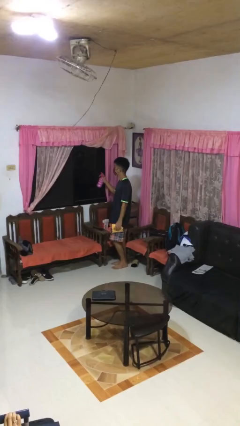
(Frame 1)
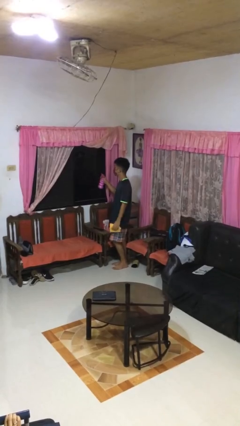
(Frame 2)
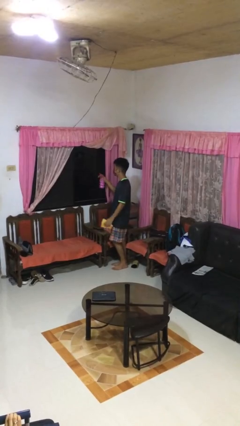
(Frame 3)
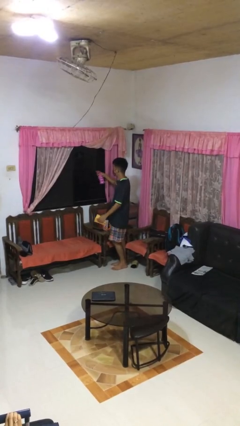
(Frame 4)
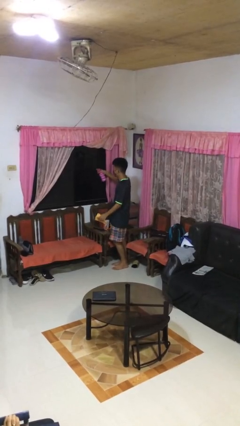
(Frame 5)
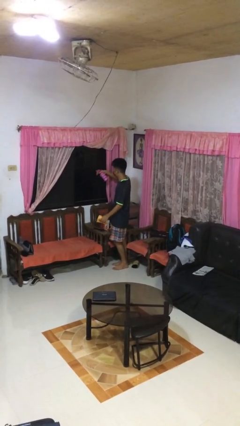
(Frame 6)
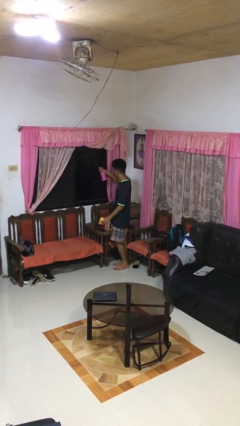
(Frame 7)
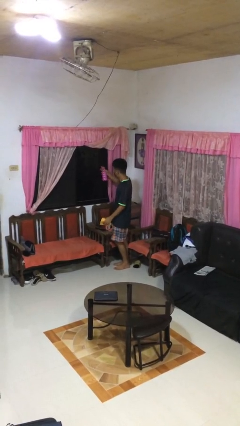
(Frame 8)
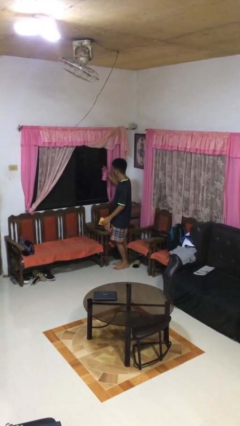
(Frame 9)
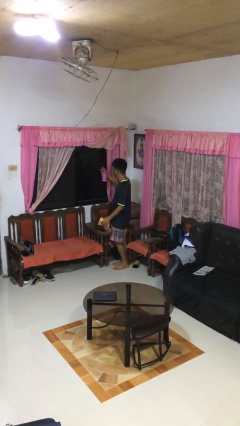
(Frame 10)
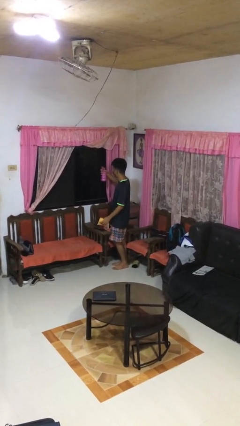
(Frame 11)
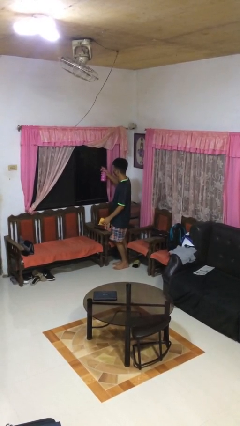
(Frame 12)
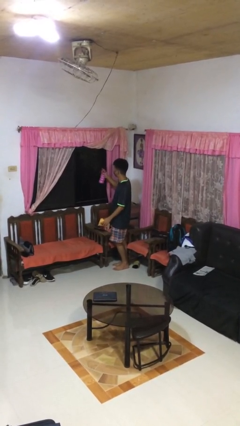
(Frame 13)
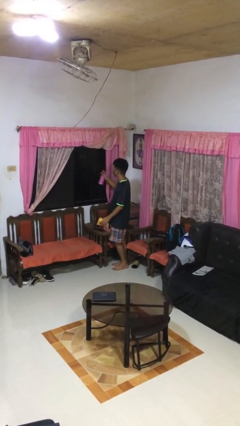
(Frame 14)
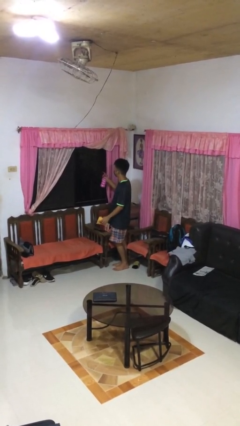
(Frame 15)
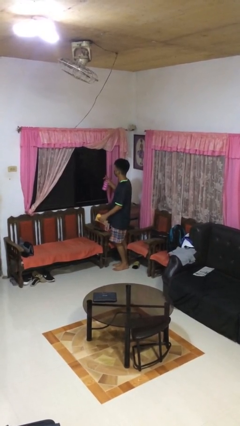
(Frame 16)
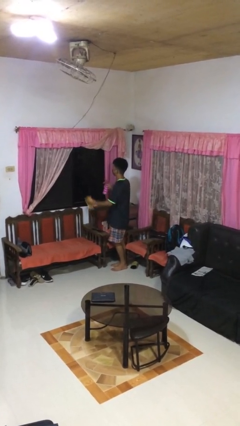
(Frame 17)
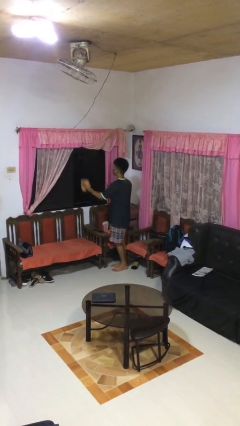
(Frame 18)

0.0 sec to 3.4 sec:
person sprays from bottle

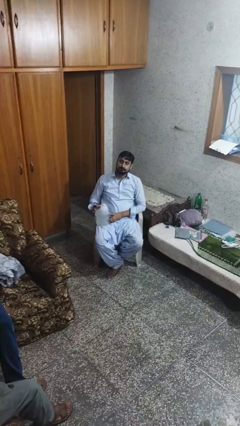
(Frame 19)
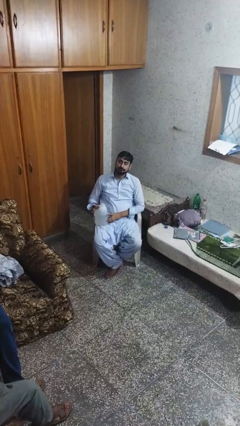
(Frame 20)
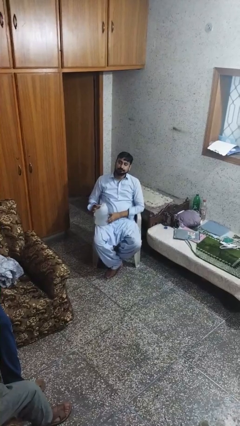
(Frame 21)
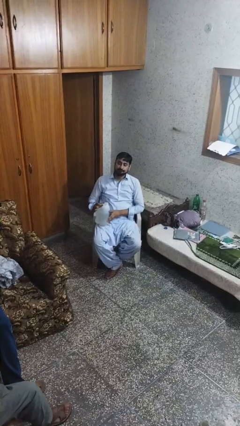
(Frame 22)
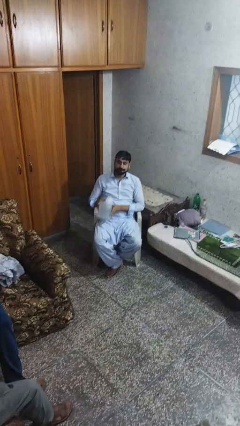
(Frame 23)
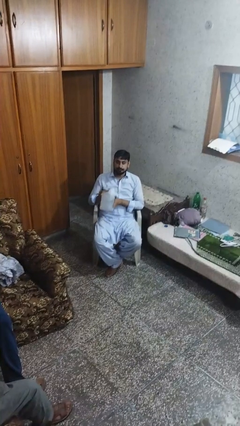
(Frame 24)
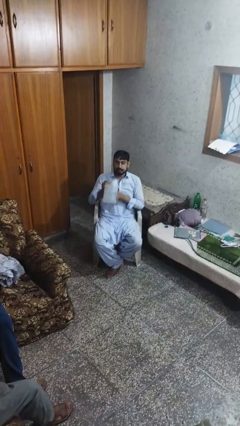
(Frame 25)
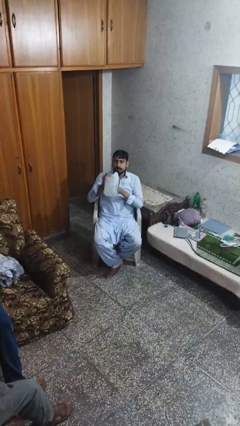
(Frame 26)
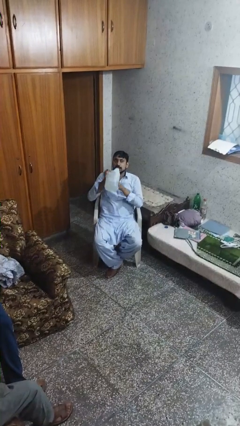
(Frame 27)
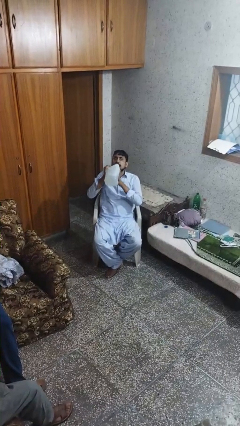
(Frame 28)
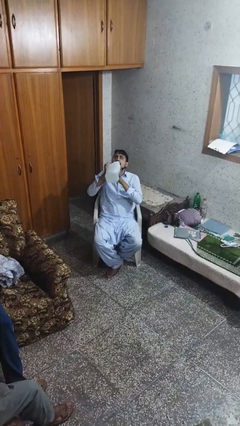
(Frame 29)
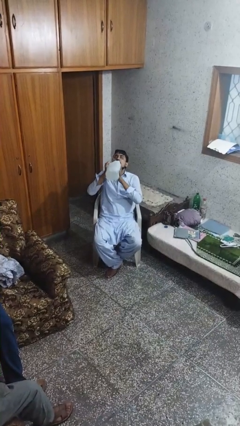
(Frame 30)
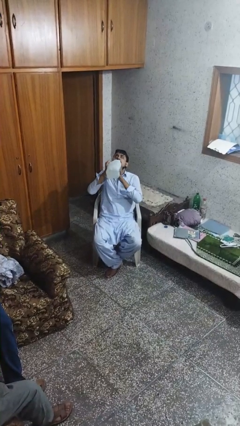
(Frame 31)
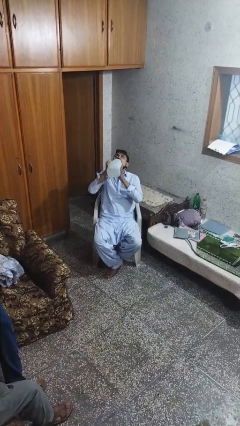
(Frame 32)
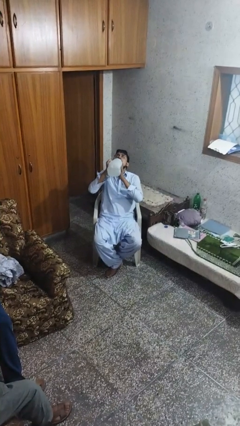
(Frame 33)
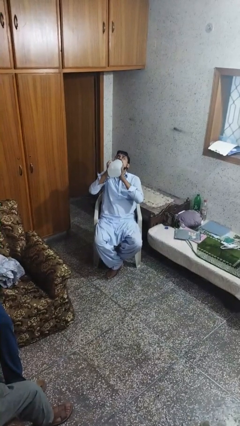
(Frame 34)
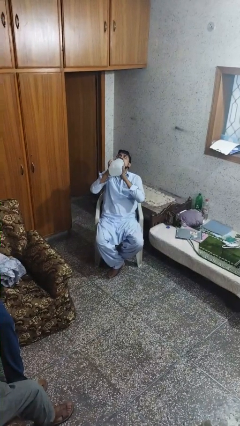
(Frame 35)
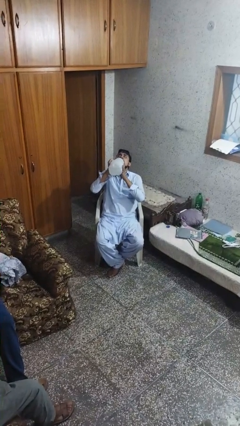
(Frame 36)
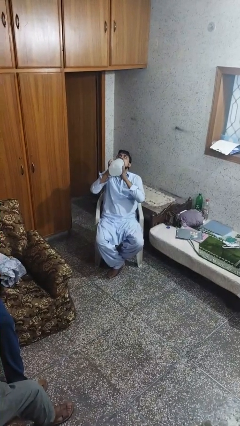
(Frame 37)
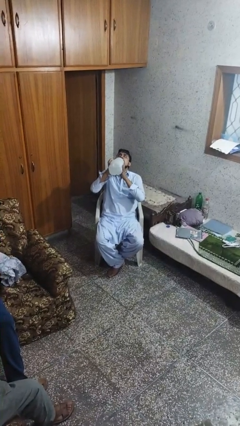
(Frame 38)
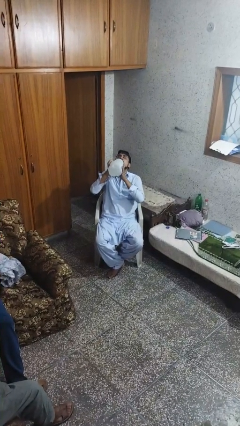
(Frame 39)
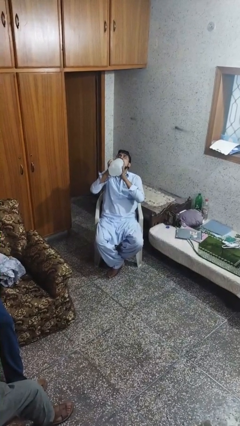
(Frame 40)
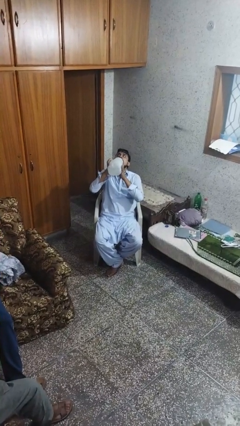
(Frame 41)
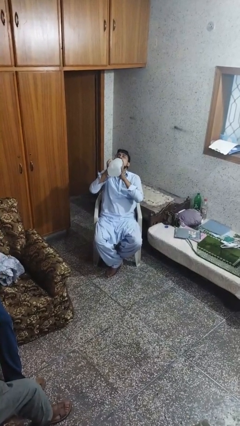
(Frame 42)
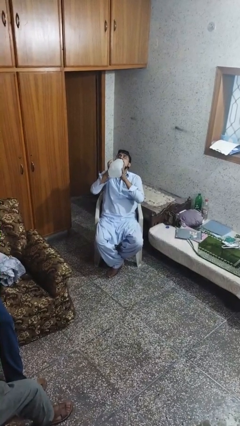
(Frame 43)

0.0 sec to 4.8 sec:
person drinks from bottle

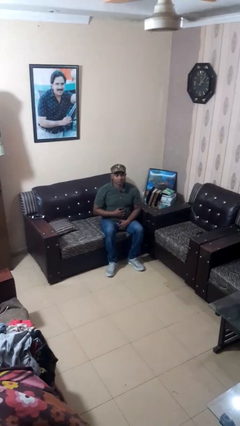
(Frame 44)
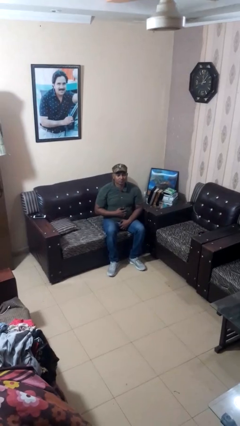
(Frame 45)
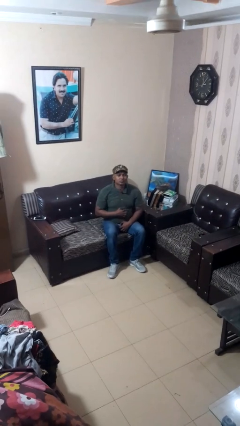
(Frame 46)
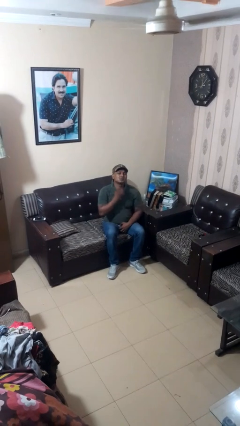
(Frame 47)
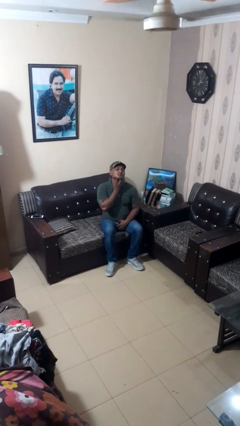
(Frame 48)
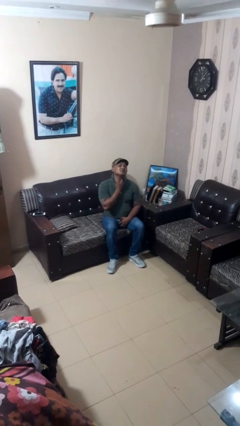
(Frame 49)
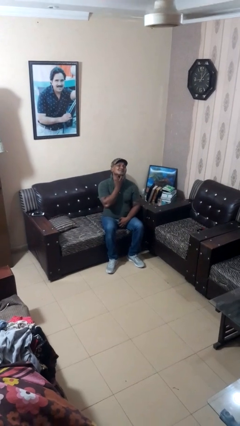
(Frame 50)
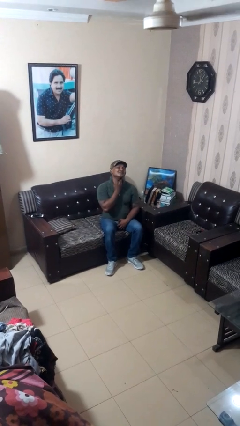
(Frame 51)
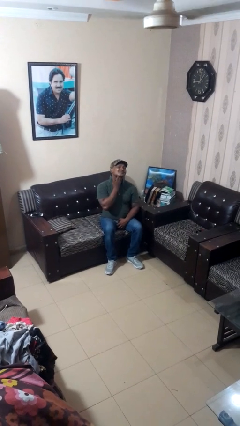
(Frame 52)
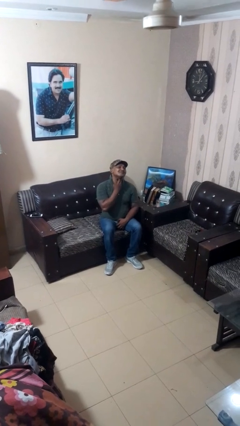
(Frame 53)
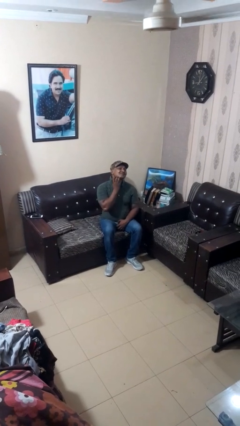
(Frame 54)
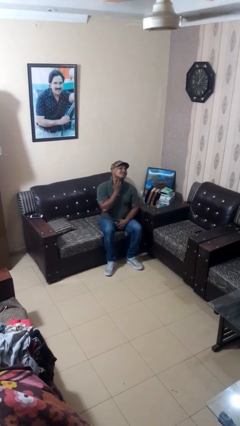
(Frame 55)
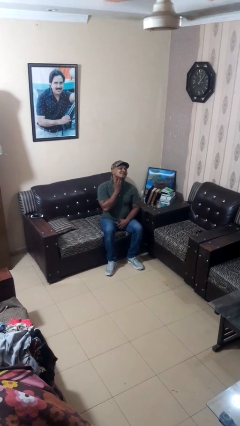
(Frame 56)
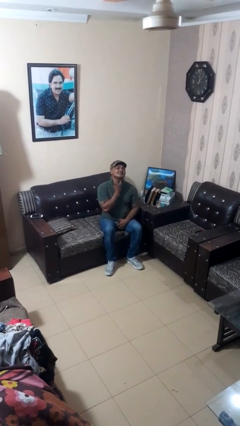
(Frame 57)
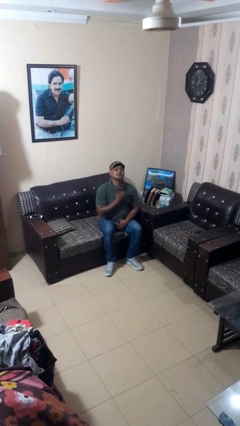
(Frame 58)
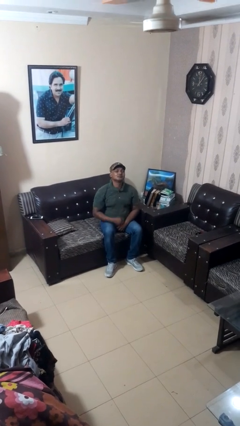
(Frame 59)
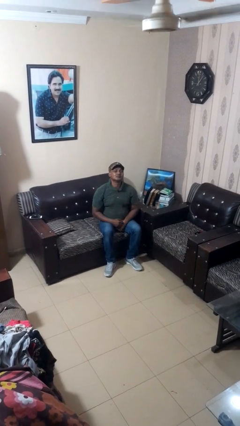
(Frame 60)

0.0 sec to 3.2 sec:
person rubs neck

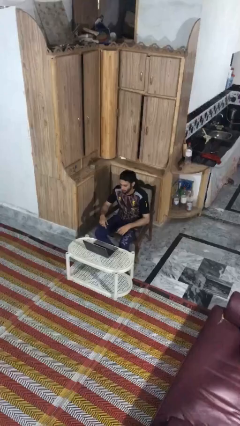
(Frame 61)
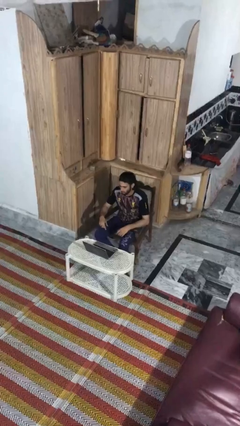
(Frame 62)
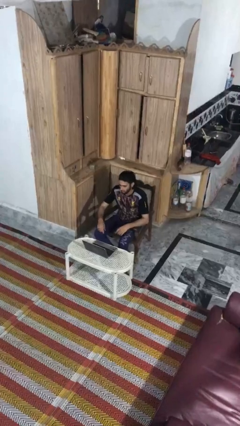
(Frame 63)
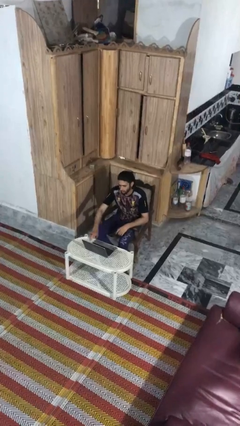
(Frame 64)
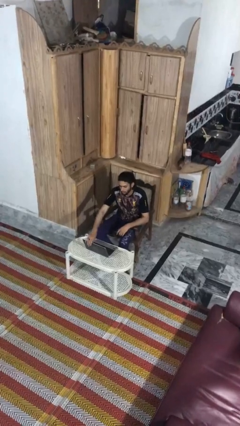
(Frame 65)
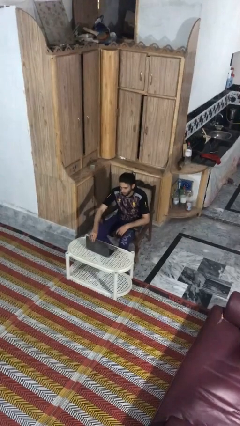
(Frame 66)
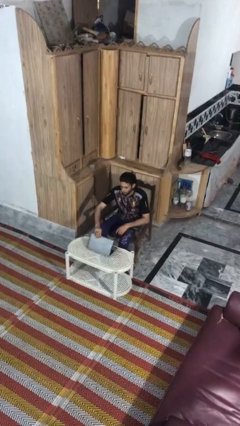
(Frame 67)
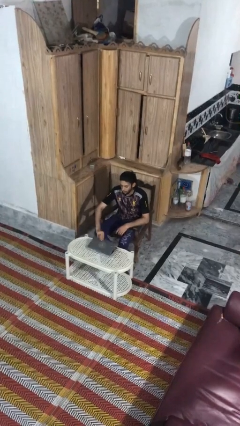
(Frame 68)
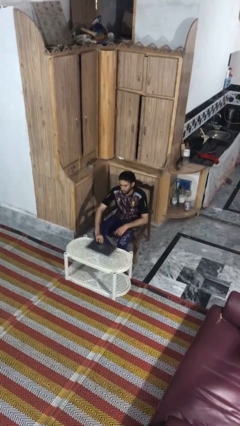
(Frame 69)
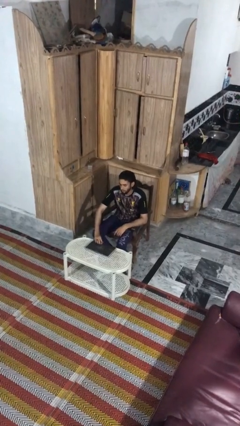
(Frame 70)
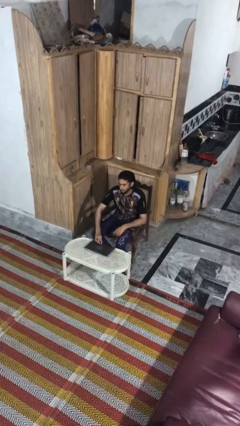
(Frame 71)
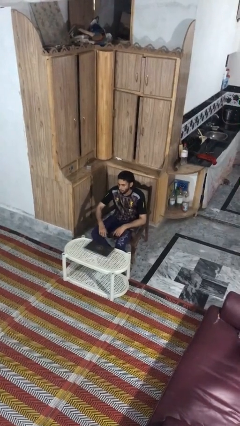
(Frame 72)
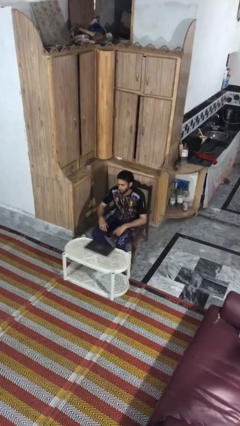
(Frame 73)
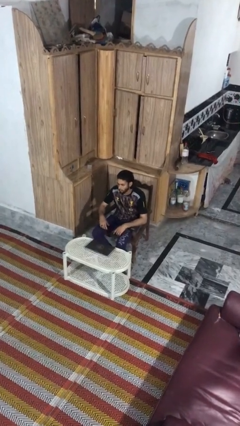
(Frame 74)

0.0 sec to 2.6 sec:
person closes laptop

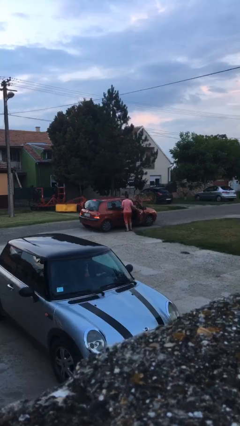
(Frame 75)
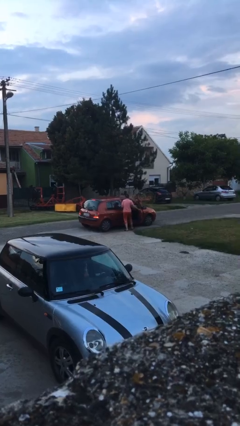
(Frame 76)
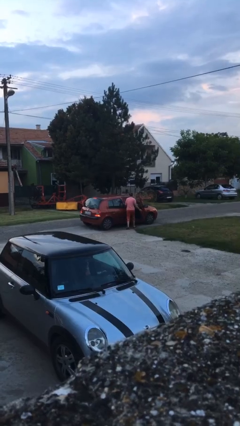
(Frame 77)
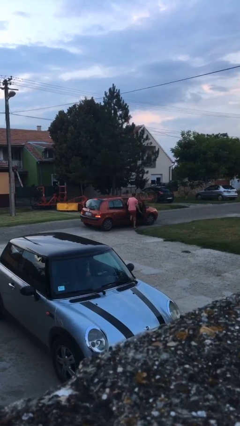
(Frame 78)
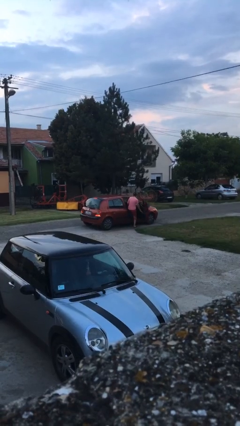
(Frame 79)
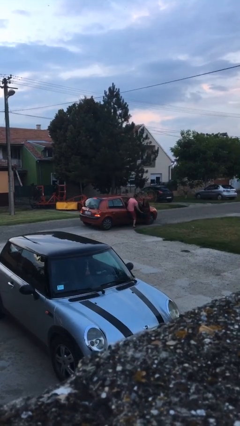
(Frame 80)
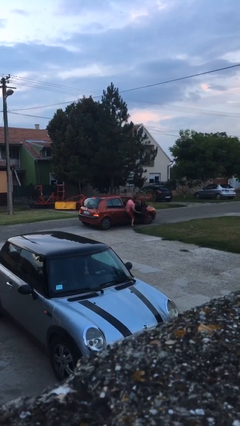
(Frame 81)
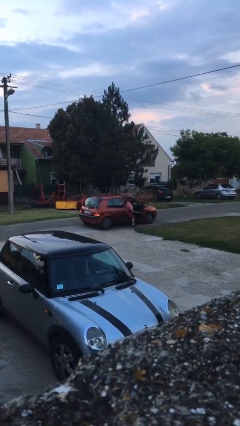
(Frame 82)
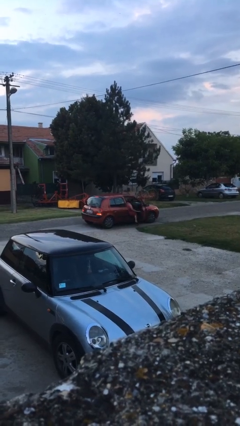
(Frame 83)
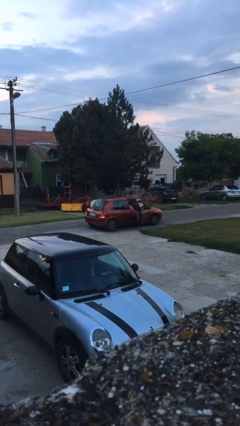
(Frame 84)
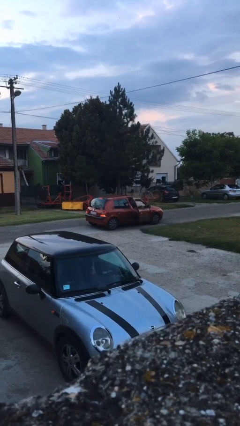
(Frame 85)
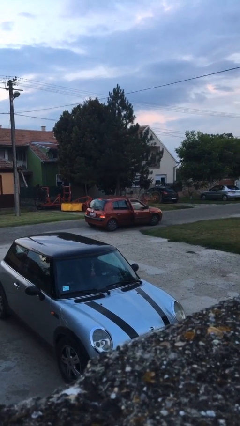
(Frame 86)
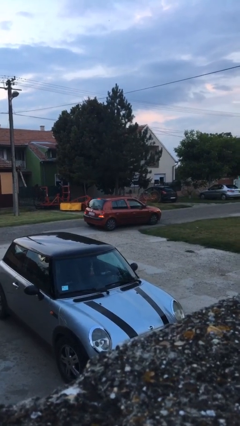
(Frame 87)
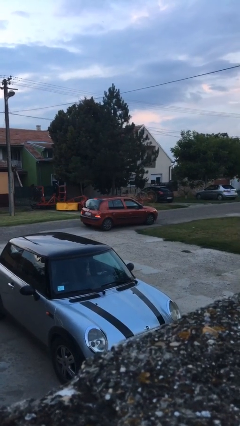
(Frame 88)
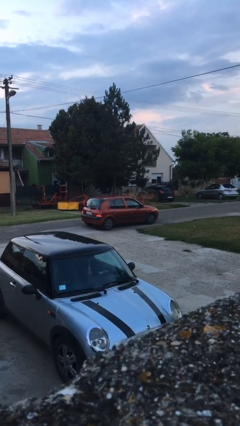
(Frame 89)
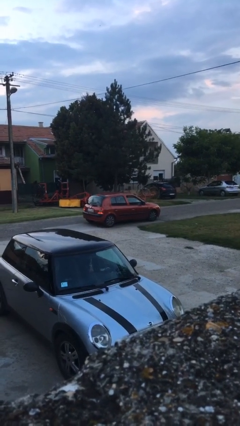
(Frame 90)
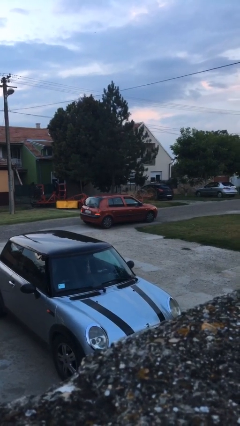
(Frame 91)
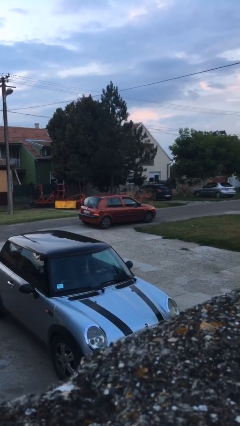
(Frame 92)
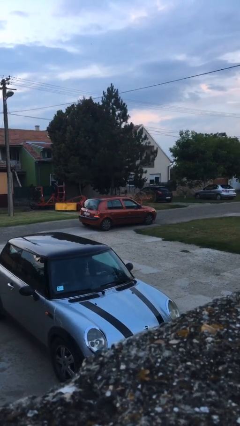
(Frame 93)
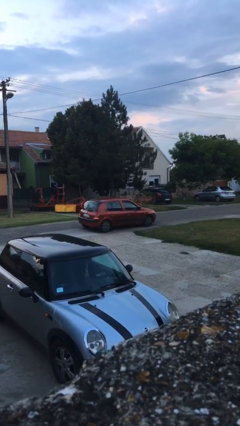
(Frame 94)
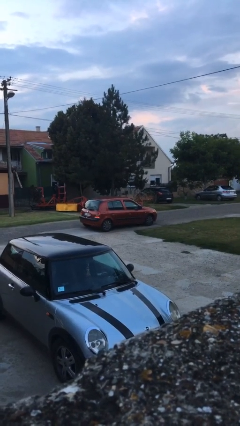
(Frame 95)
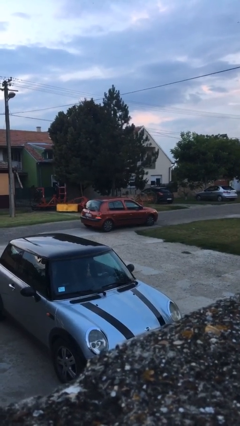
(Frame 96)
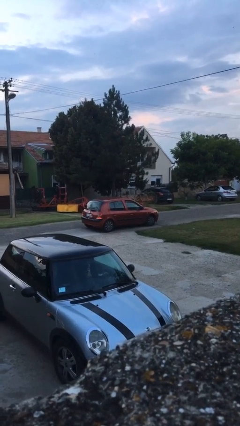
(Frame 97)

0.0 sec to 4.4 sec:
car picks up person
